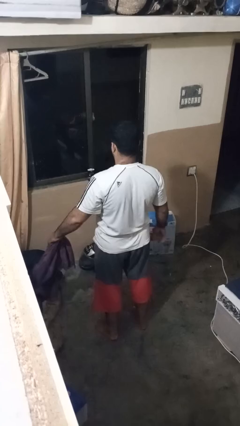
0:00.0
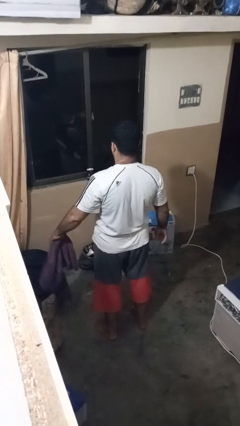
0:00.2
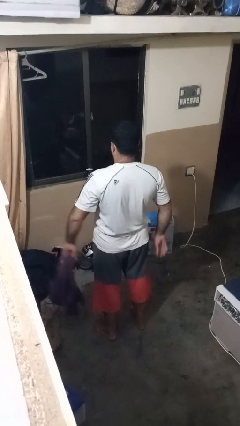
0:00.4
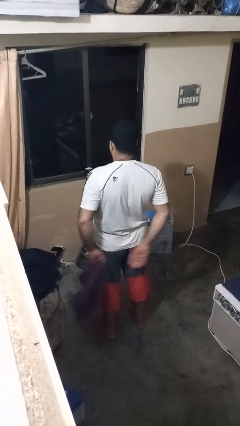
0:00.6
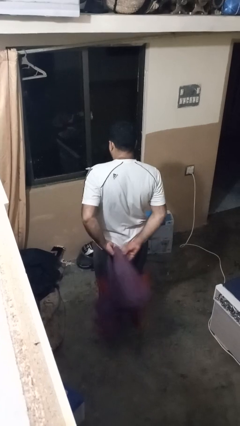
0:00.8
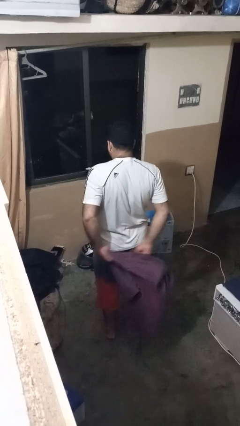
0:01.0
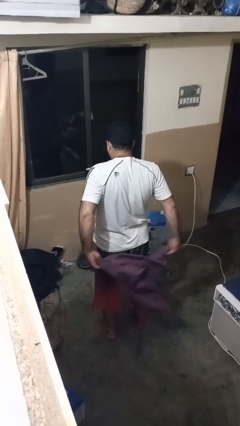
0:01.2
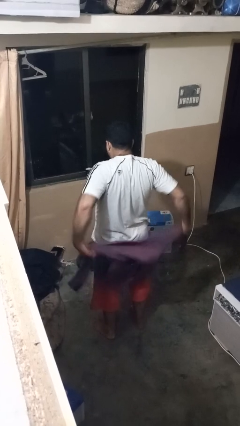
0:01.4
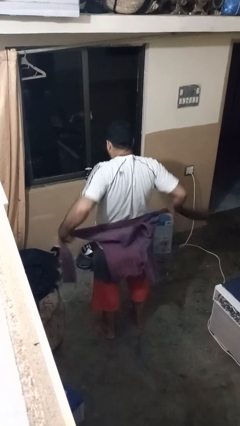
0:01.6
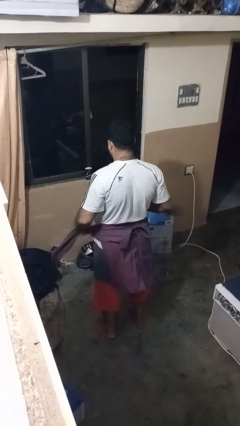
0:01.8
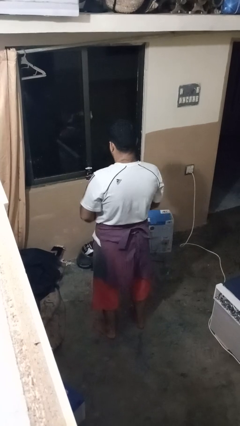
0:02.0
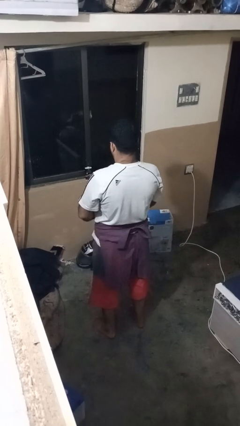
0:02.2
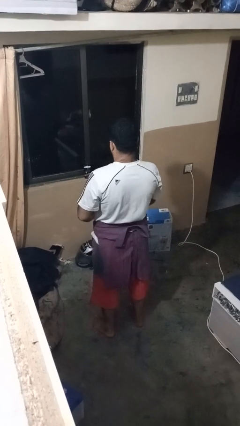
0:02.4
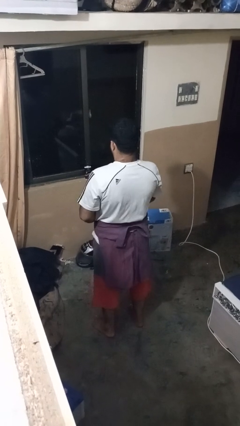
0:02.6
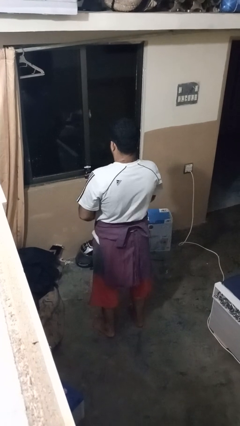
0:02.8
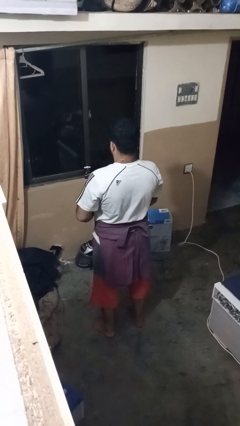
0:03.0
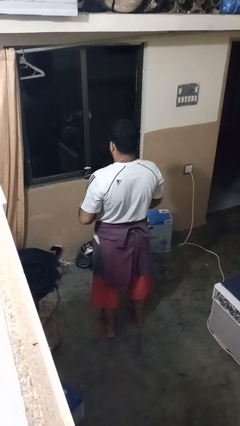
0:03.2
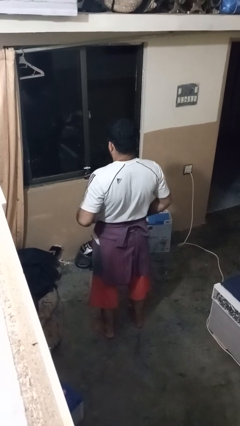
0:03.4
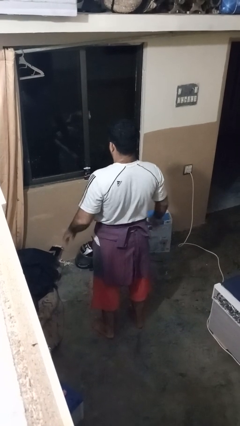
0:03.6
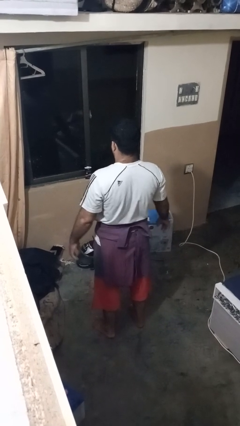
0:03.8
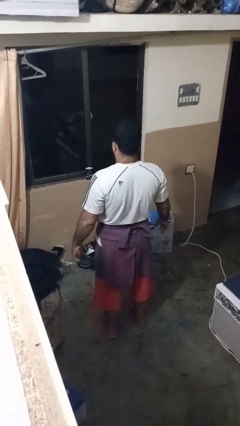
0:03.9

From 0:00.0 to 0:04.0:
person ties jacket around waist

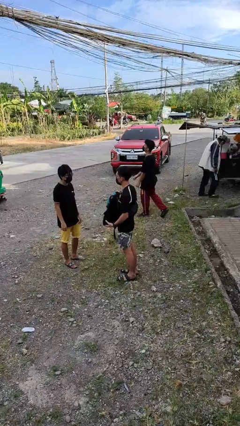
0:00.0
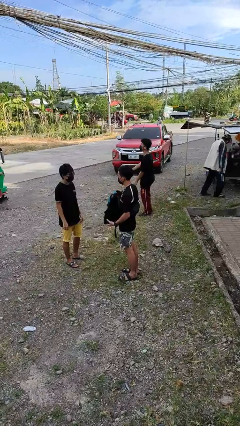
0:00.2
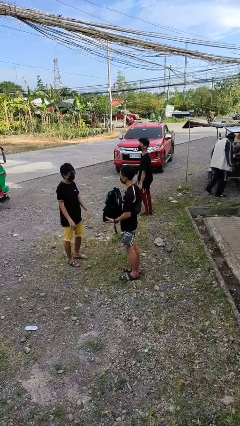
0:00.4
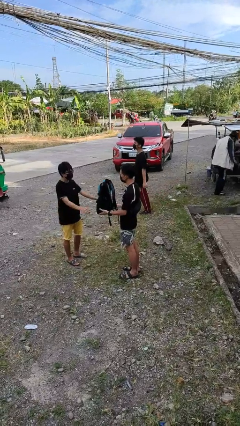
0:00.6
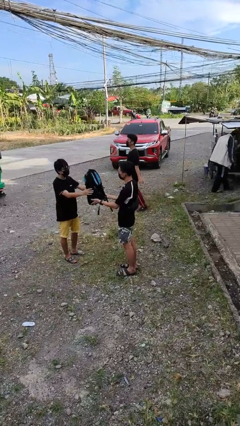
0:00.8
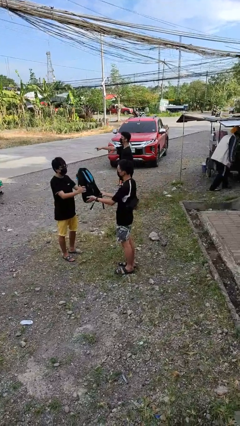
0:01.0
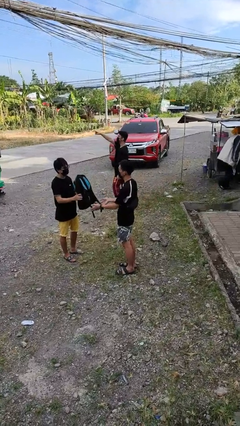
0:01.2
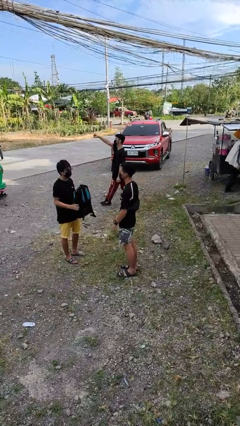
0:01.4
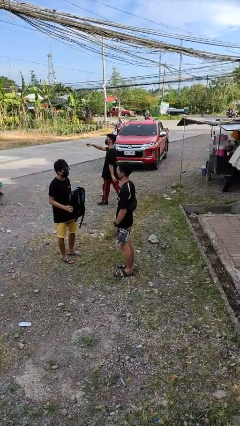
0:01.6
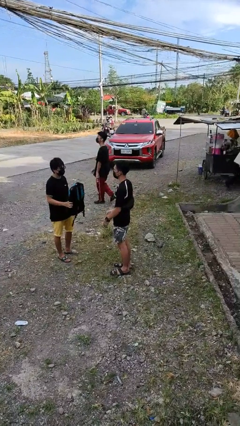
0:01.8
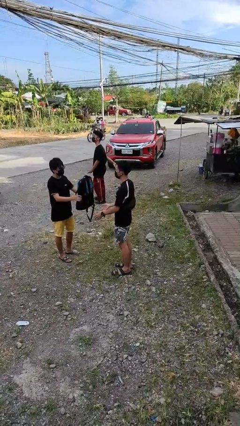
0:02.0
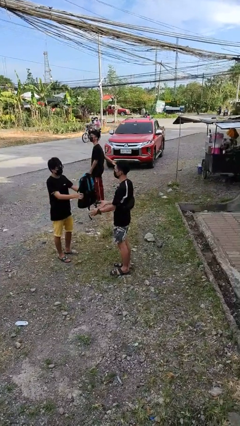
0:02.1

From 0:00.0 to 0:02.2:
person transfers object to person

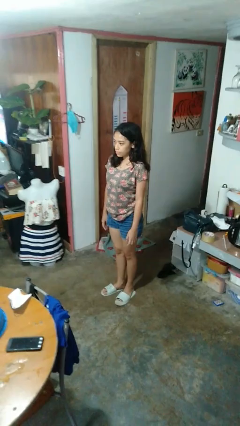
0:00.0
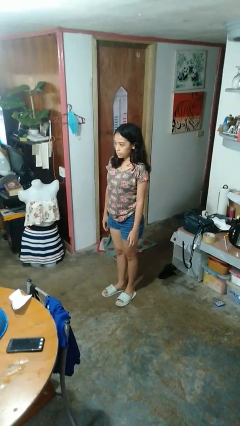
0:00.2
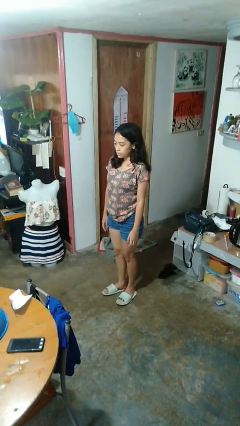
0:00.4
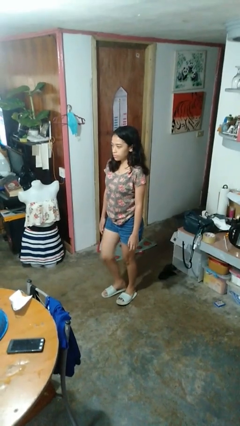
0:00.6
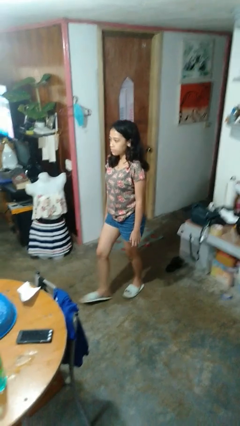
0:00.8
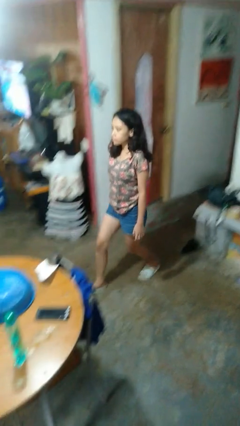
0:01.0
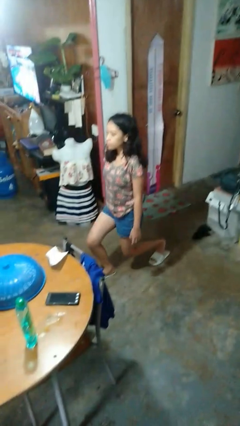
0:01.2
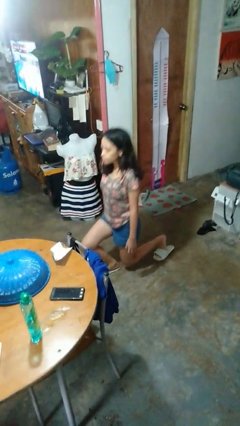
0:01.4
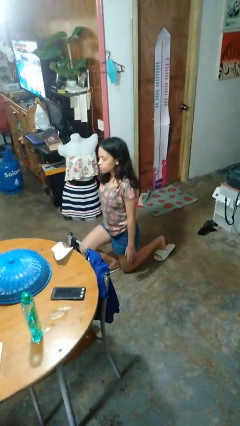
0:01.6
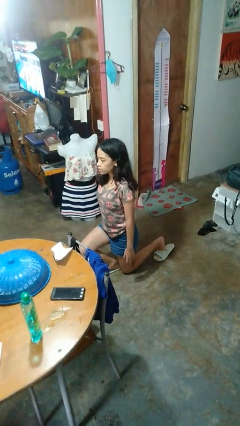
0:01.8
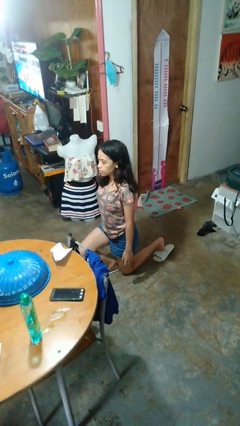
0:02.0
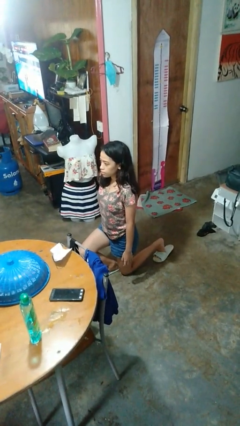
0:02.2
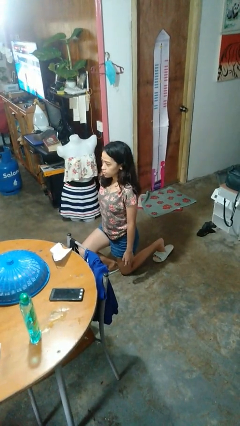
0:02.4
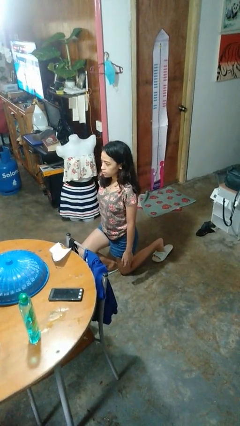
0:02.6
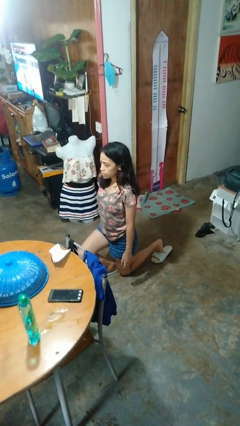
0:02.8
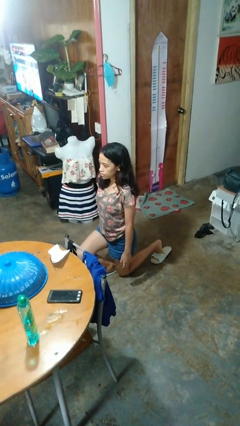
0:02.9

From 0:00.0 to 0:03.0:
person kneels

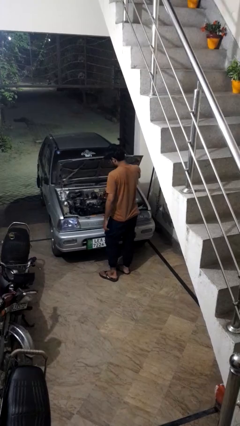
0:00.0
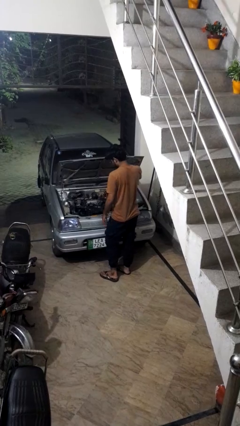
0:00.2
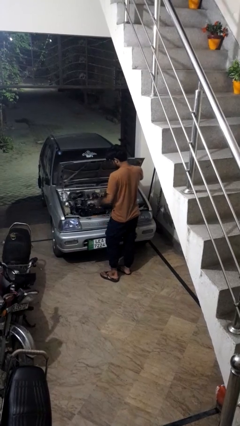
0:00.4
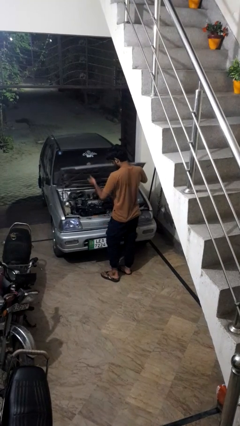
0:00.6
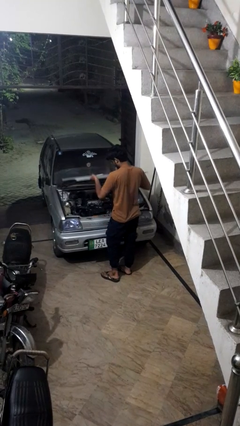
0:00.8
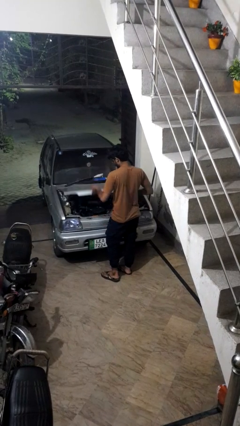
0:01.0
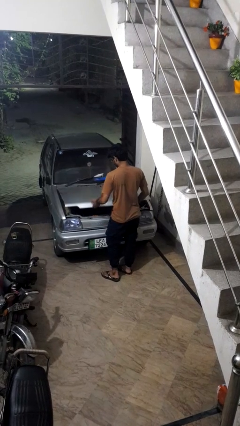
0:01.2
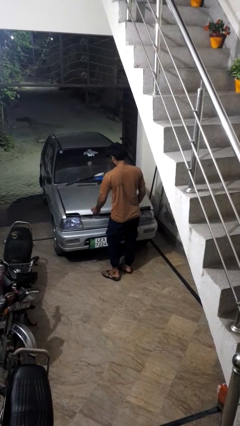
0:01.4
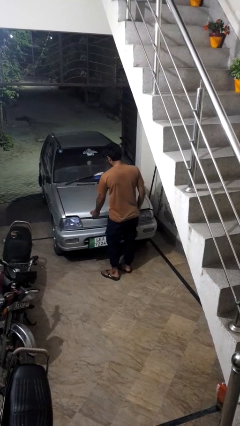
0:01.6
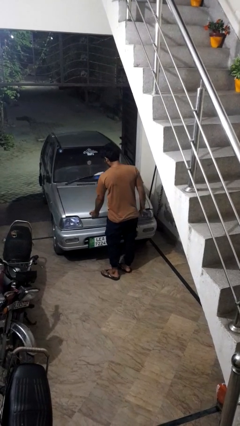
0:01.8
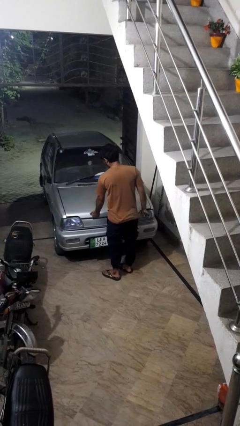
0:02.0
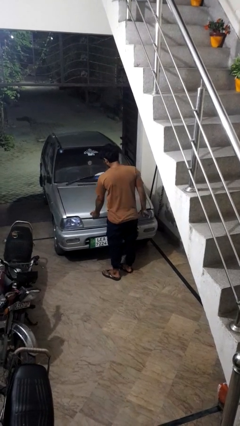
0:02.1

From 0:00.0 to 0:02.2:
person closes car hood

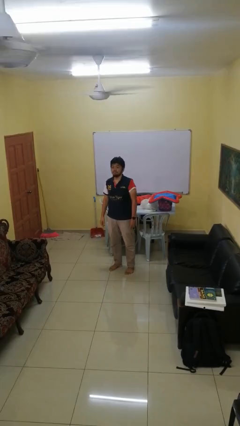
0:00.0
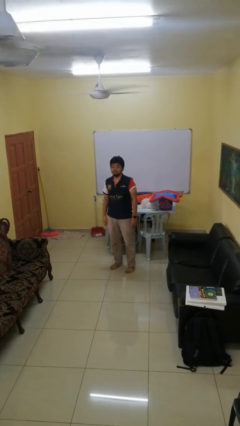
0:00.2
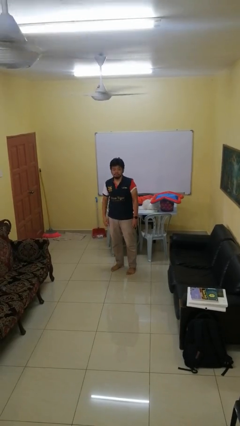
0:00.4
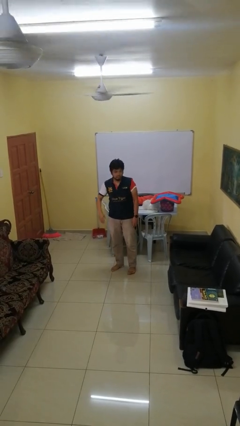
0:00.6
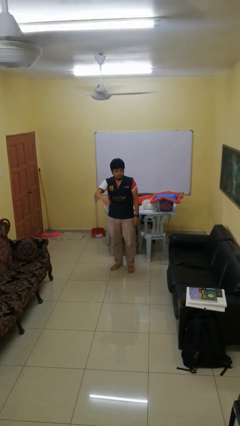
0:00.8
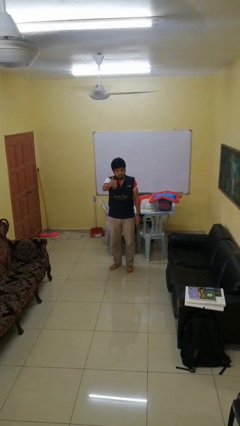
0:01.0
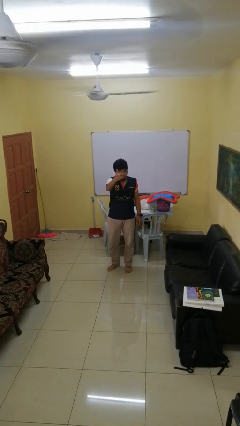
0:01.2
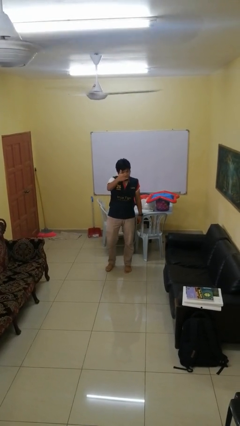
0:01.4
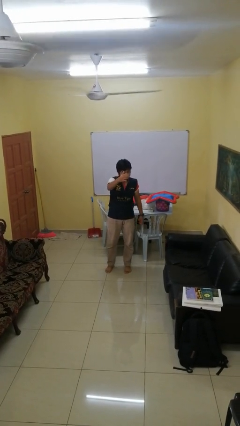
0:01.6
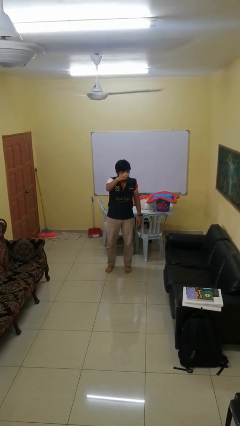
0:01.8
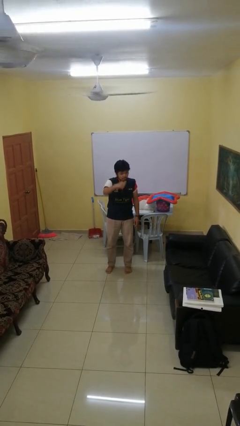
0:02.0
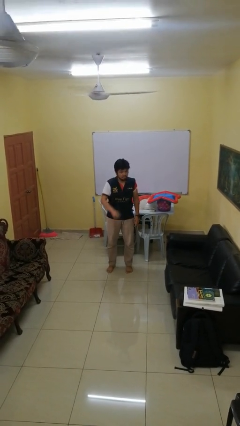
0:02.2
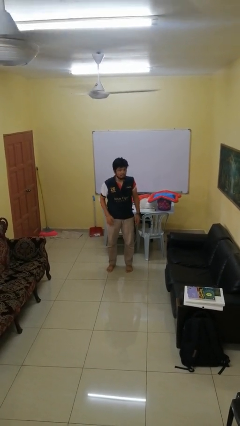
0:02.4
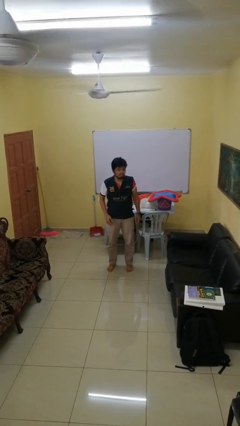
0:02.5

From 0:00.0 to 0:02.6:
person gestures come here

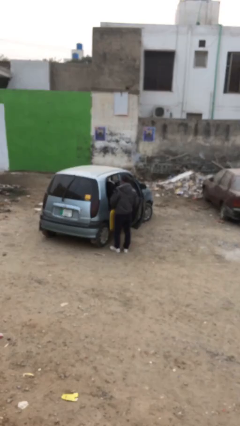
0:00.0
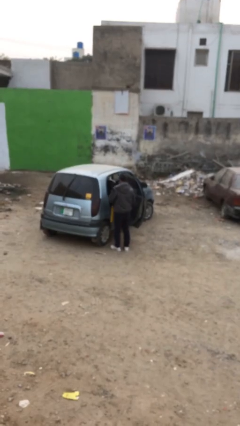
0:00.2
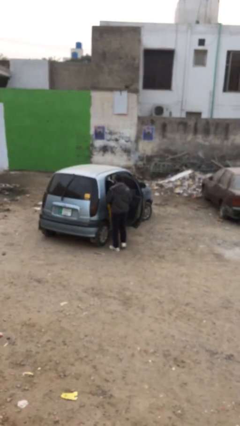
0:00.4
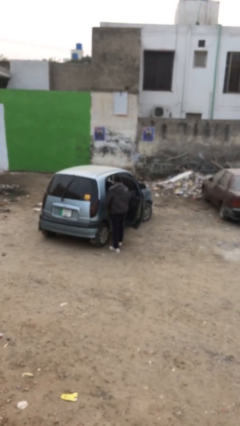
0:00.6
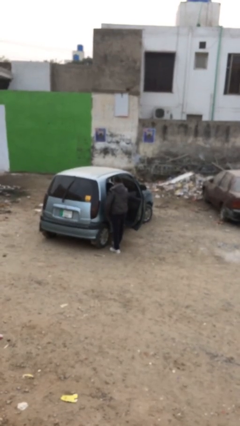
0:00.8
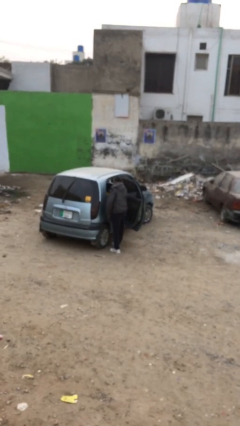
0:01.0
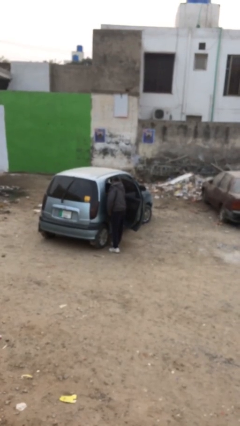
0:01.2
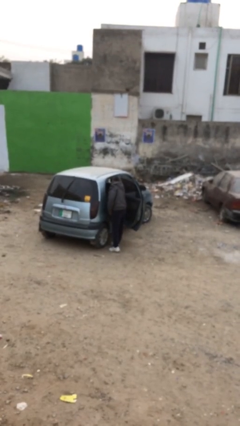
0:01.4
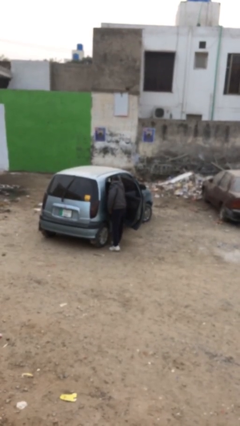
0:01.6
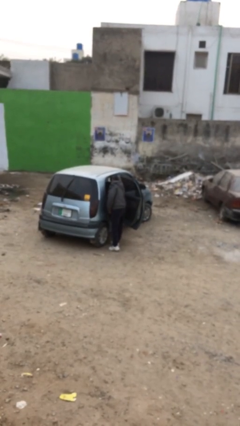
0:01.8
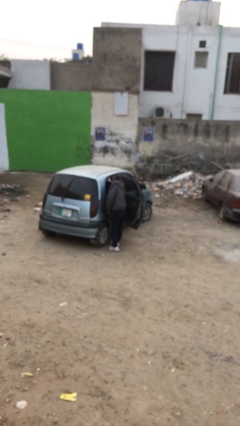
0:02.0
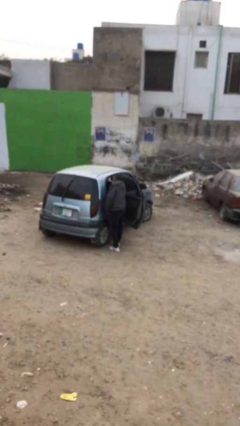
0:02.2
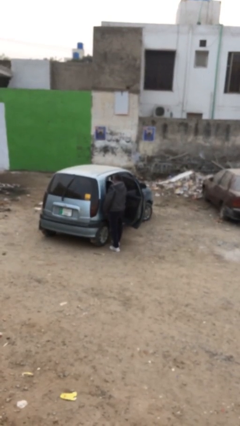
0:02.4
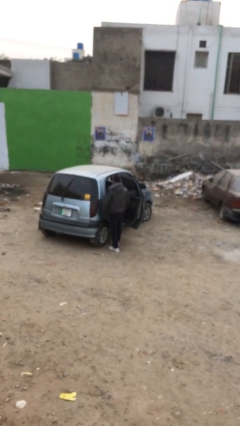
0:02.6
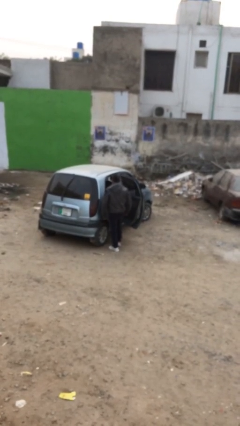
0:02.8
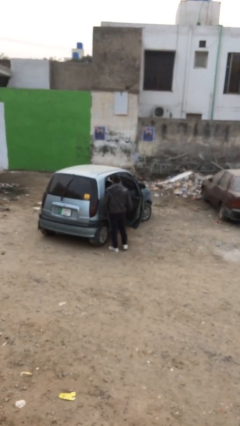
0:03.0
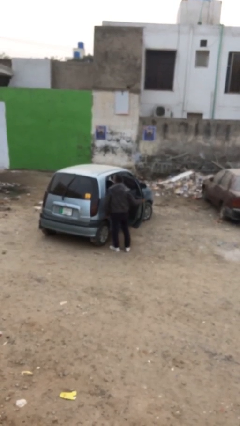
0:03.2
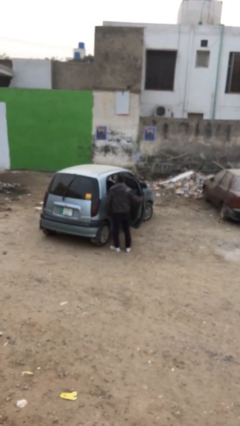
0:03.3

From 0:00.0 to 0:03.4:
person loads car
